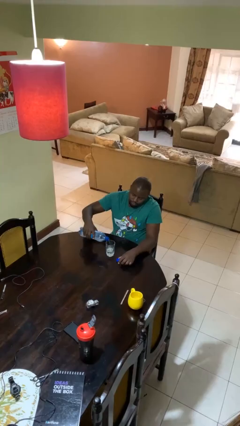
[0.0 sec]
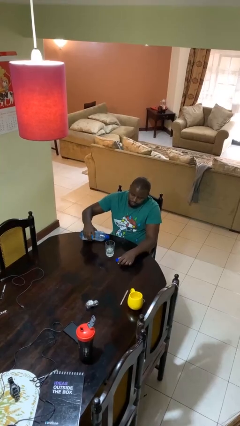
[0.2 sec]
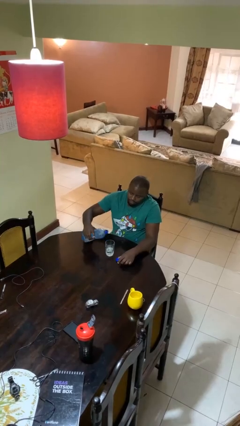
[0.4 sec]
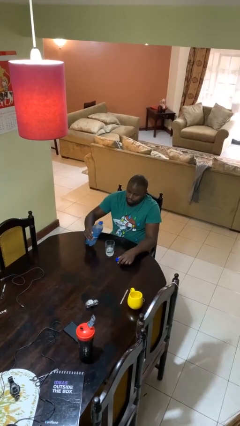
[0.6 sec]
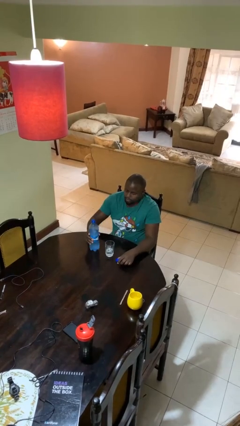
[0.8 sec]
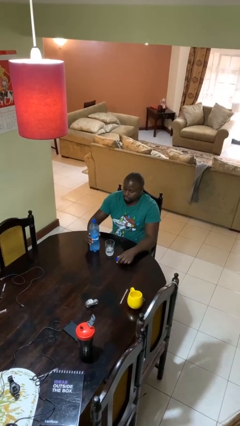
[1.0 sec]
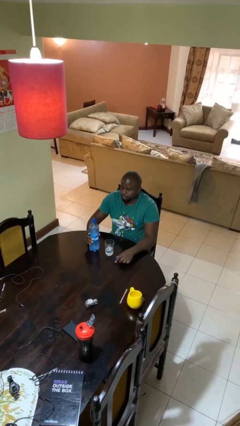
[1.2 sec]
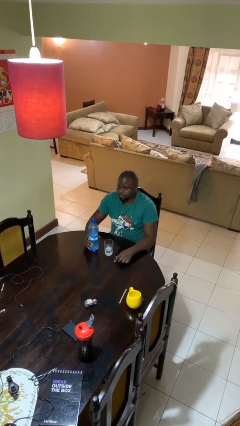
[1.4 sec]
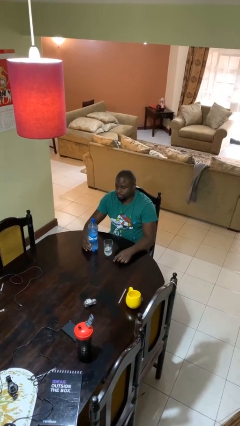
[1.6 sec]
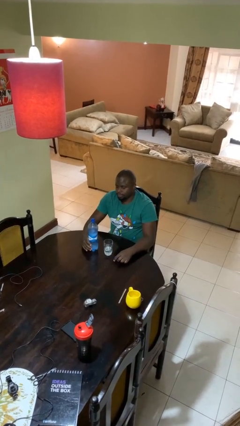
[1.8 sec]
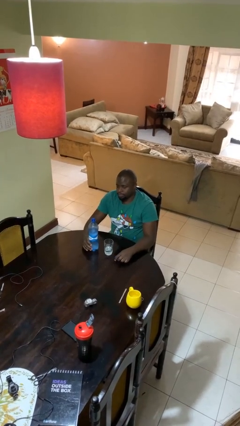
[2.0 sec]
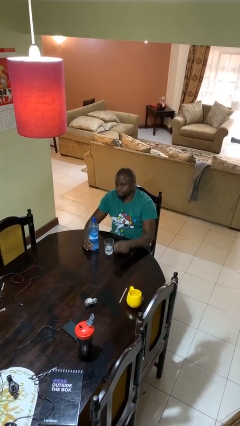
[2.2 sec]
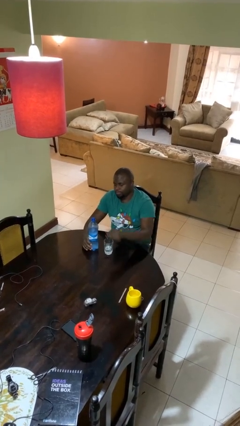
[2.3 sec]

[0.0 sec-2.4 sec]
person pours liquid into cup

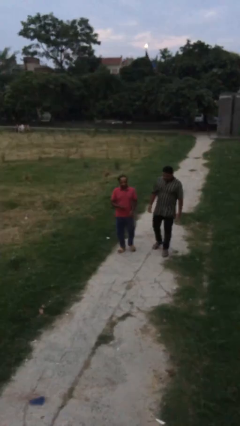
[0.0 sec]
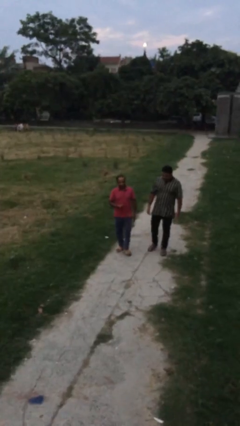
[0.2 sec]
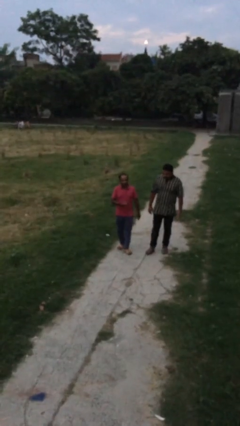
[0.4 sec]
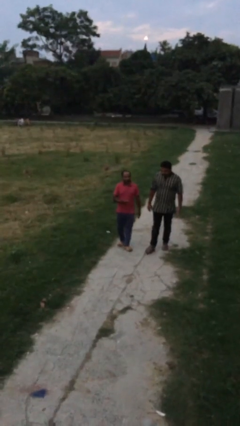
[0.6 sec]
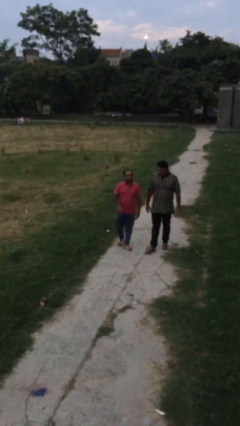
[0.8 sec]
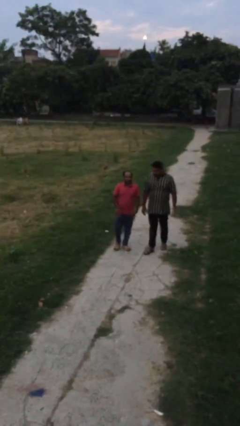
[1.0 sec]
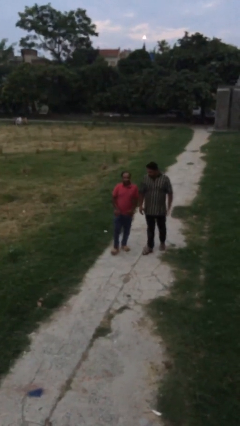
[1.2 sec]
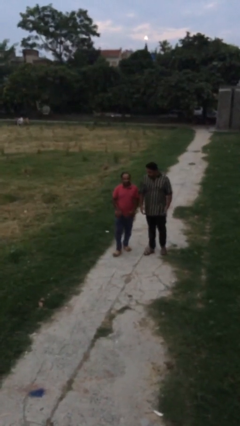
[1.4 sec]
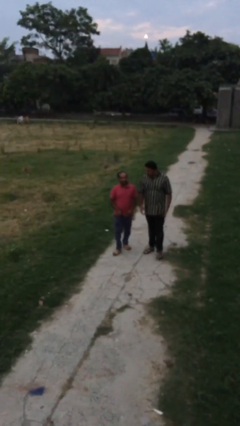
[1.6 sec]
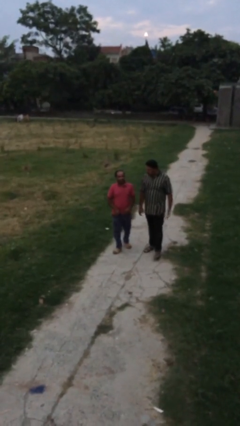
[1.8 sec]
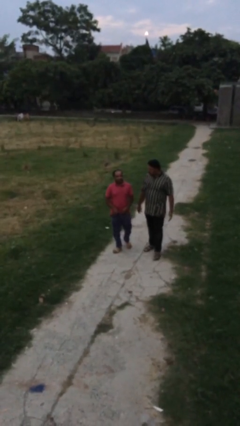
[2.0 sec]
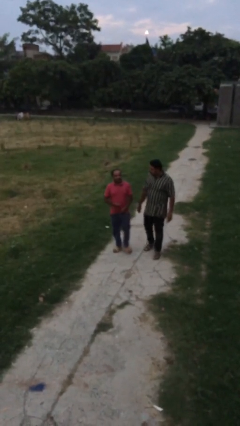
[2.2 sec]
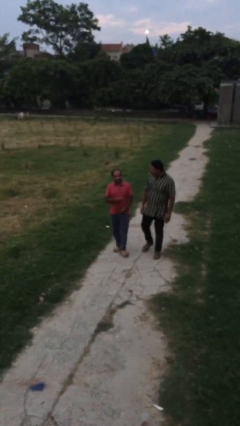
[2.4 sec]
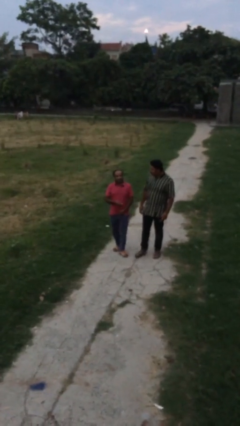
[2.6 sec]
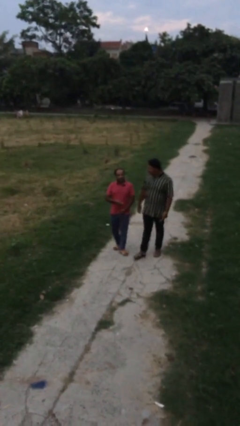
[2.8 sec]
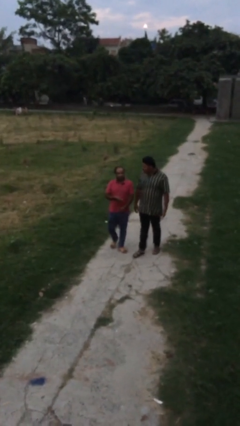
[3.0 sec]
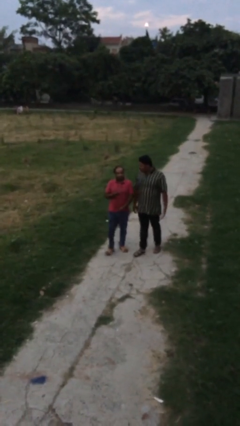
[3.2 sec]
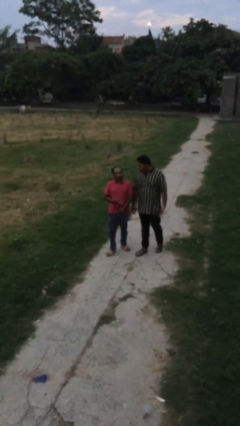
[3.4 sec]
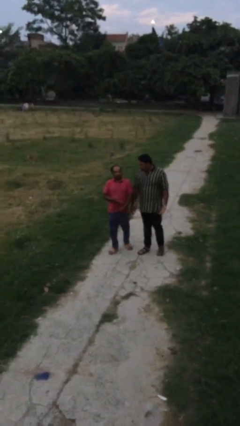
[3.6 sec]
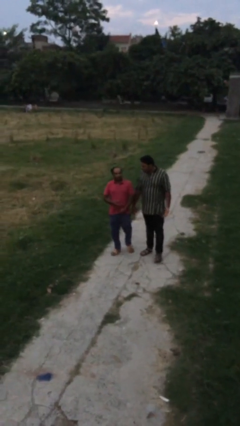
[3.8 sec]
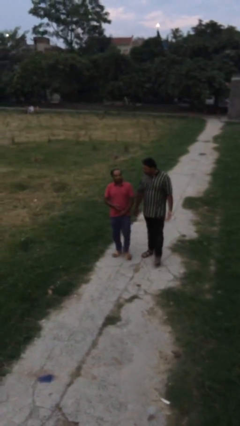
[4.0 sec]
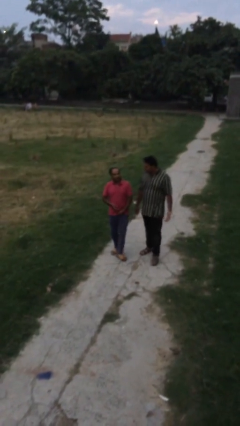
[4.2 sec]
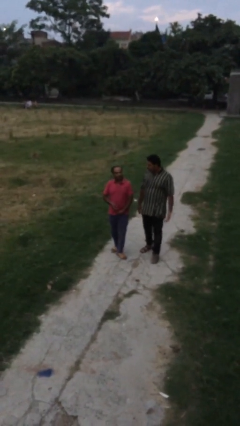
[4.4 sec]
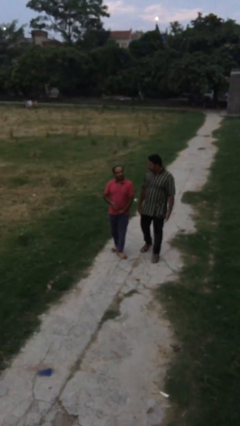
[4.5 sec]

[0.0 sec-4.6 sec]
person talks to person

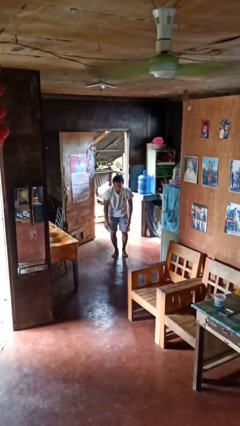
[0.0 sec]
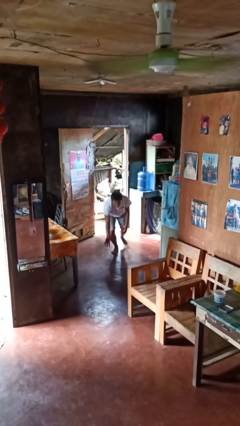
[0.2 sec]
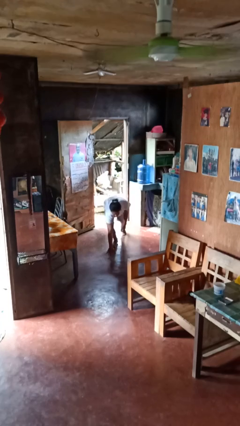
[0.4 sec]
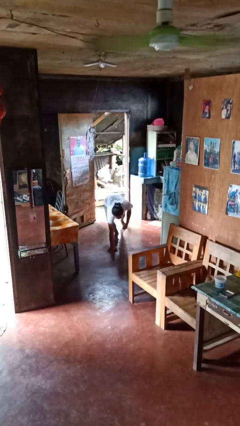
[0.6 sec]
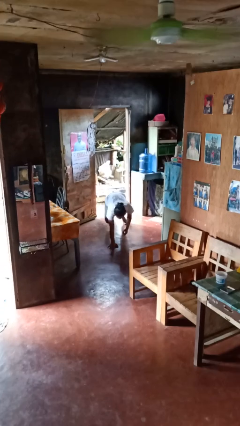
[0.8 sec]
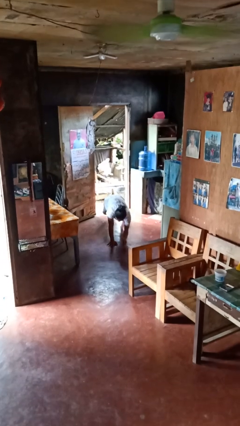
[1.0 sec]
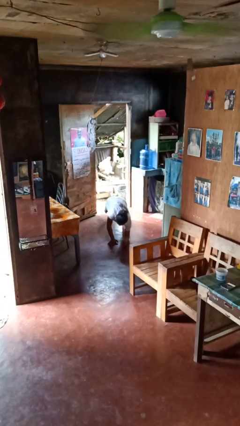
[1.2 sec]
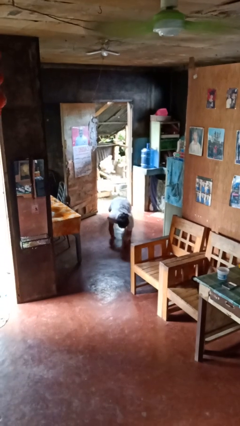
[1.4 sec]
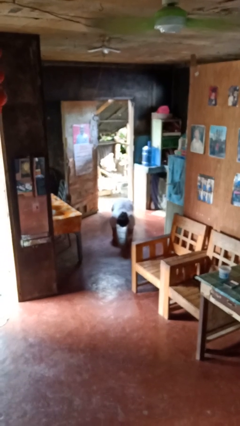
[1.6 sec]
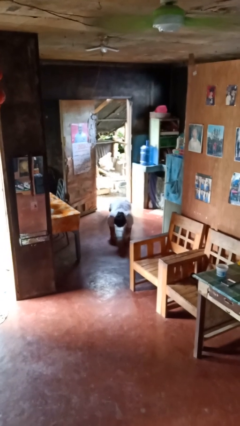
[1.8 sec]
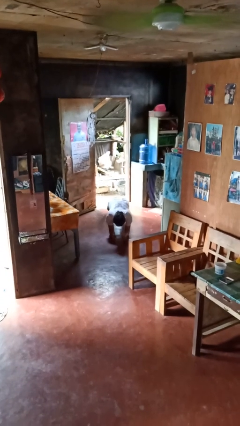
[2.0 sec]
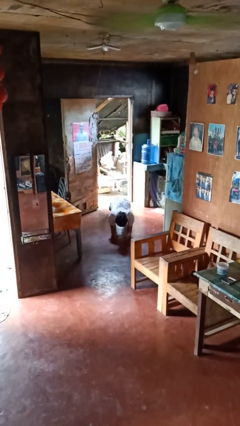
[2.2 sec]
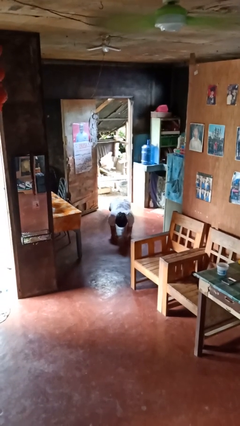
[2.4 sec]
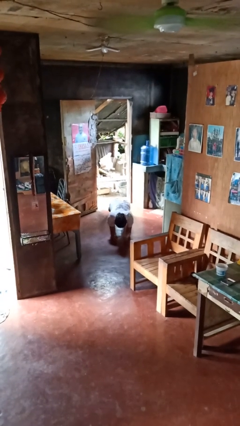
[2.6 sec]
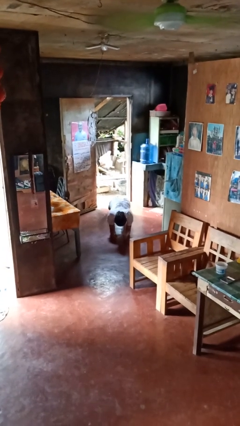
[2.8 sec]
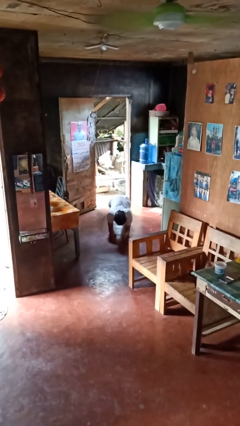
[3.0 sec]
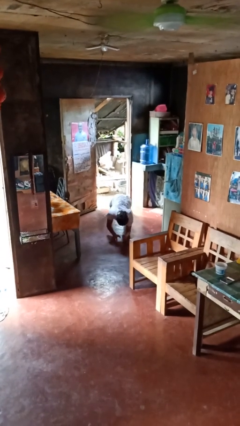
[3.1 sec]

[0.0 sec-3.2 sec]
person exercises with plank

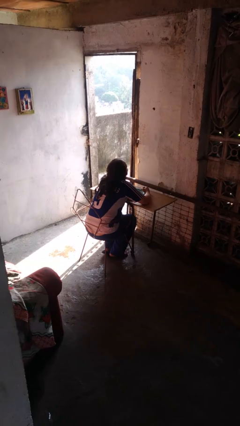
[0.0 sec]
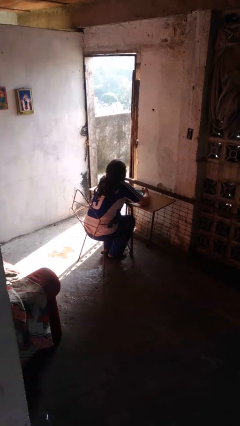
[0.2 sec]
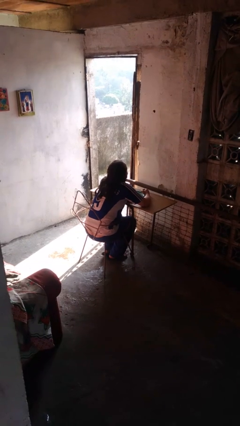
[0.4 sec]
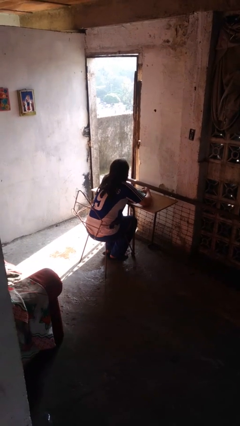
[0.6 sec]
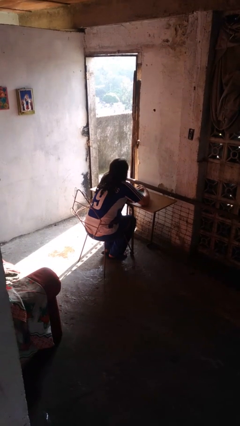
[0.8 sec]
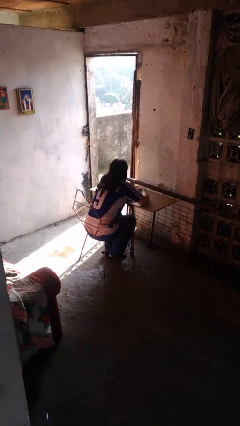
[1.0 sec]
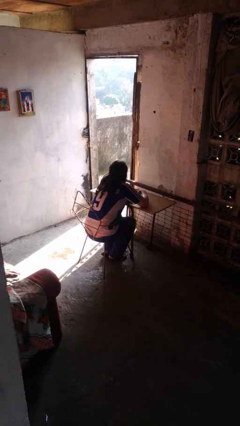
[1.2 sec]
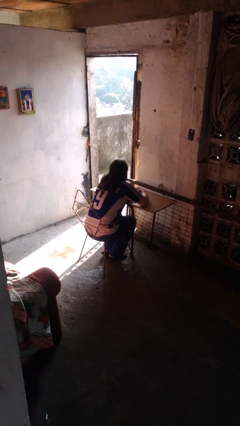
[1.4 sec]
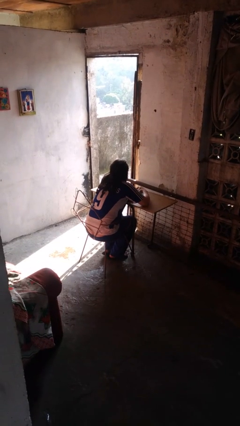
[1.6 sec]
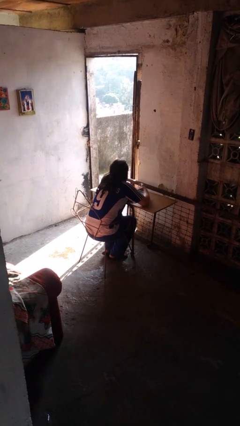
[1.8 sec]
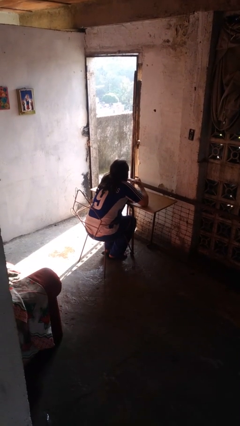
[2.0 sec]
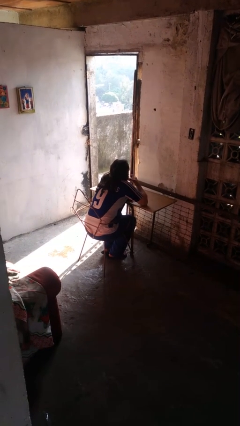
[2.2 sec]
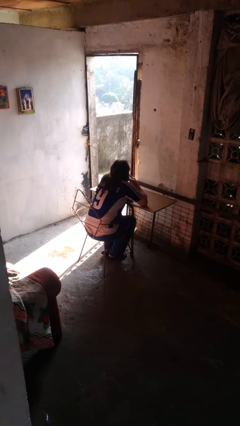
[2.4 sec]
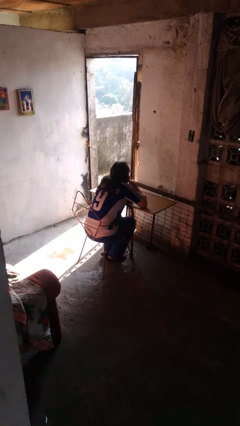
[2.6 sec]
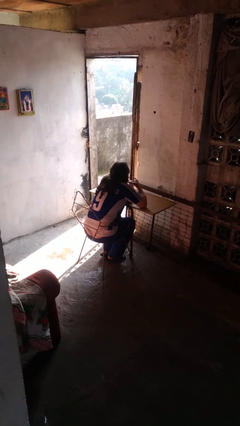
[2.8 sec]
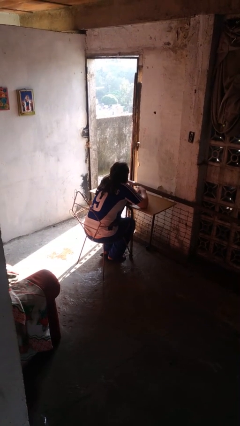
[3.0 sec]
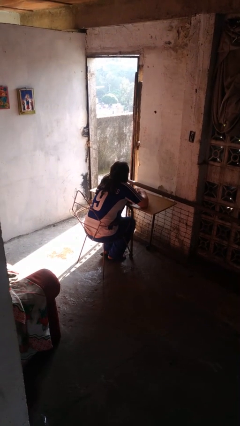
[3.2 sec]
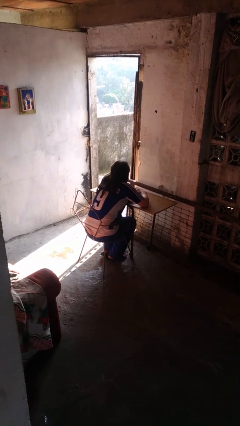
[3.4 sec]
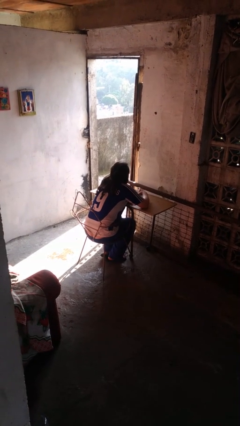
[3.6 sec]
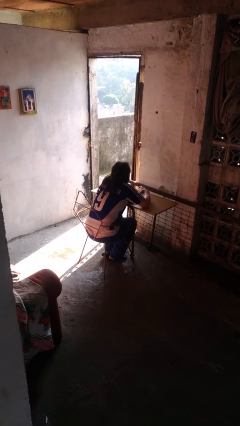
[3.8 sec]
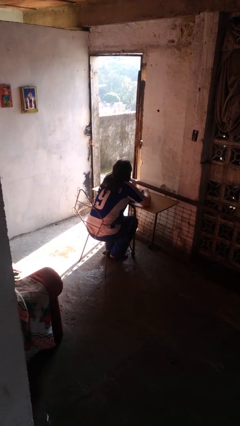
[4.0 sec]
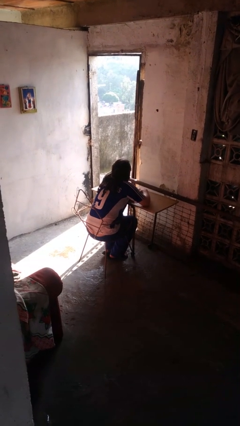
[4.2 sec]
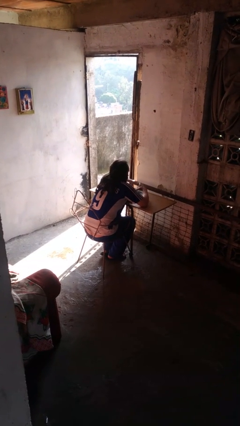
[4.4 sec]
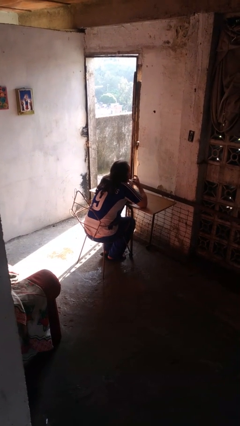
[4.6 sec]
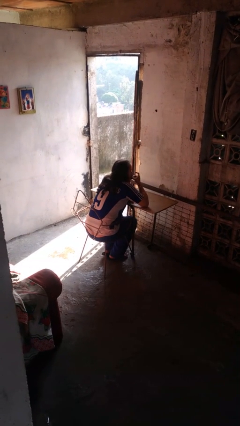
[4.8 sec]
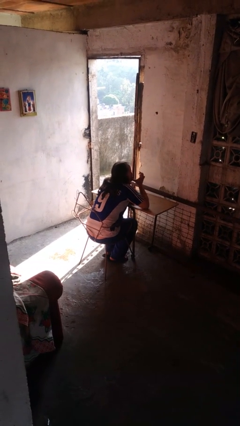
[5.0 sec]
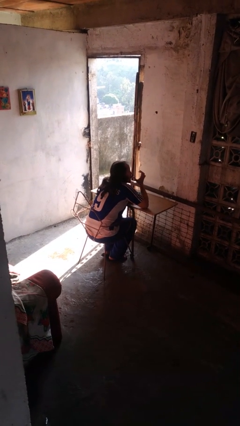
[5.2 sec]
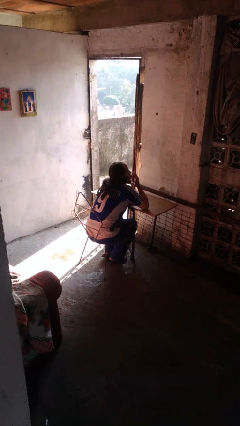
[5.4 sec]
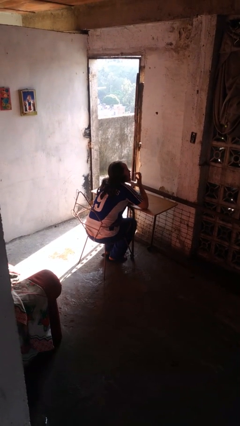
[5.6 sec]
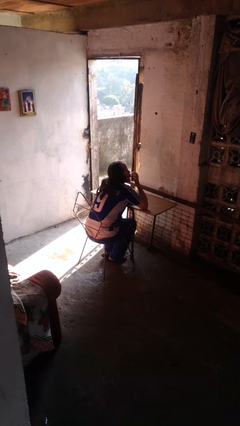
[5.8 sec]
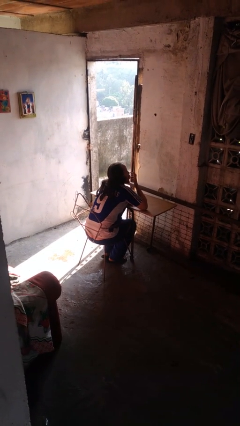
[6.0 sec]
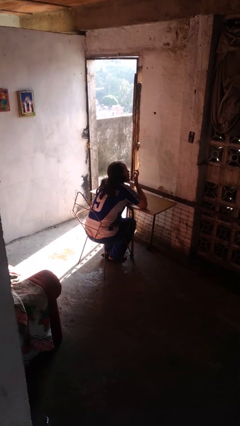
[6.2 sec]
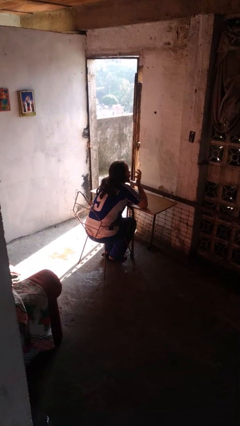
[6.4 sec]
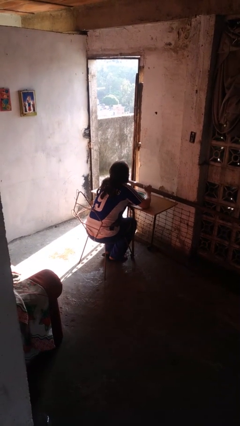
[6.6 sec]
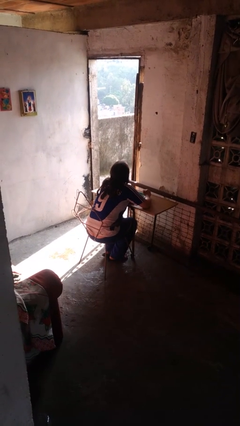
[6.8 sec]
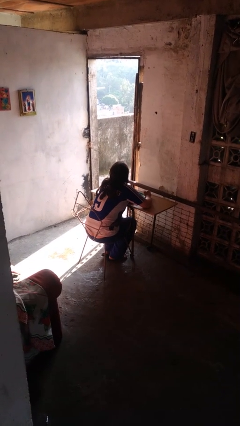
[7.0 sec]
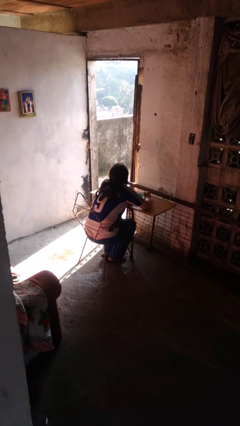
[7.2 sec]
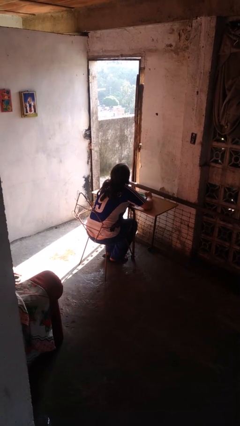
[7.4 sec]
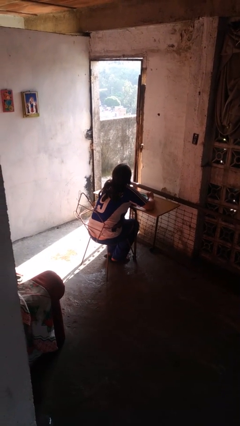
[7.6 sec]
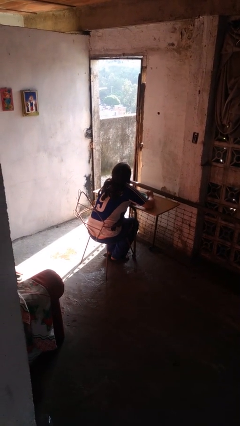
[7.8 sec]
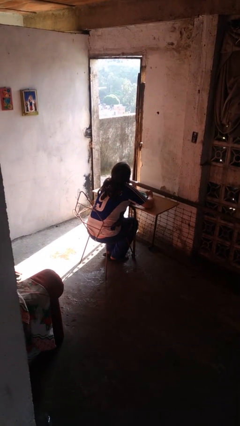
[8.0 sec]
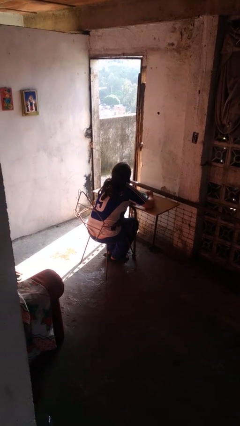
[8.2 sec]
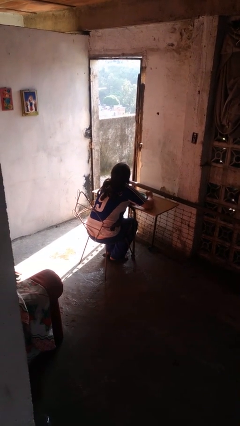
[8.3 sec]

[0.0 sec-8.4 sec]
person eats with hands
